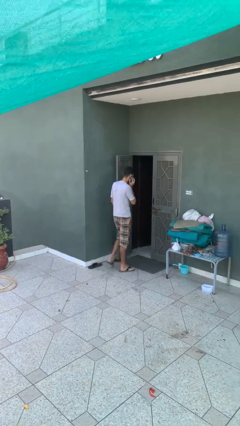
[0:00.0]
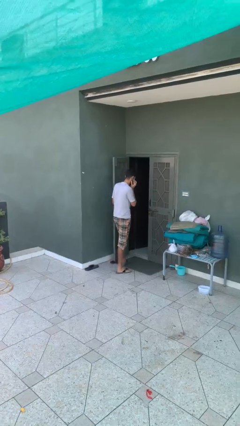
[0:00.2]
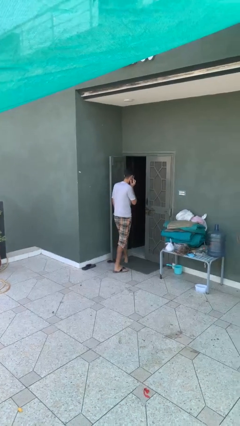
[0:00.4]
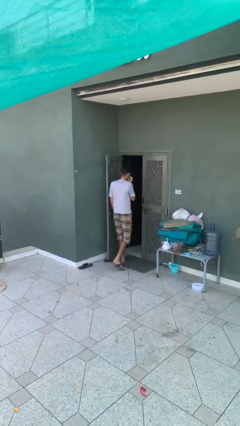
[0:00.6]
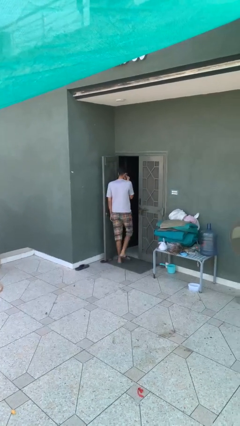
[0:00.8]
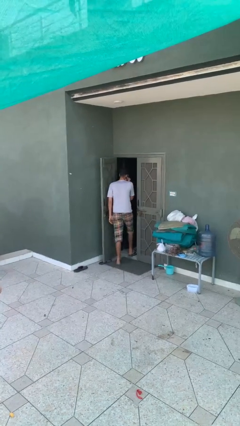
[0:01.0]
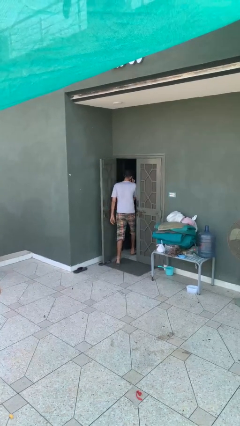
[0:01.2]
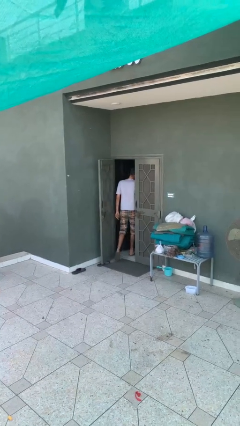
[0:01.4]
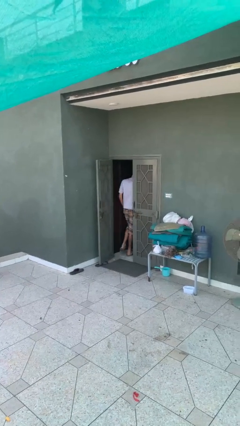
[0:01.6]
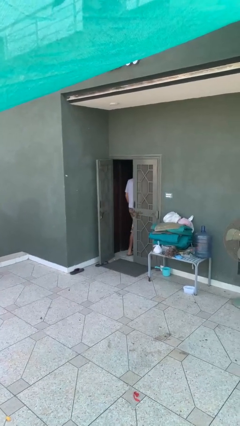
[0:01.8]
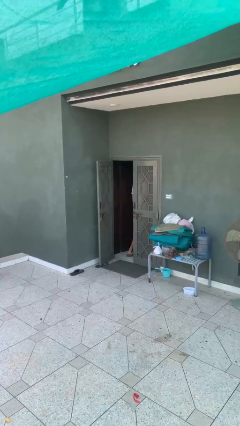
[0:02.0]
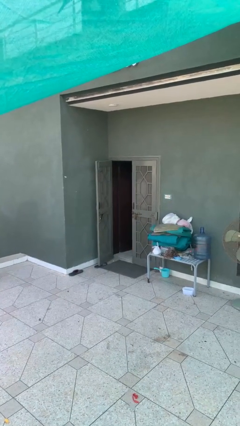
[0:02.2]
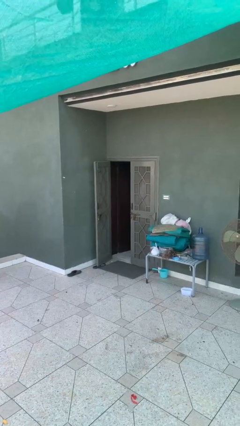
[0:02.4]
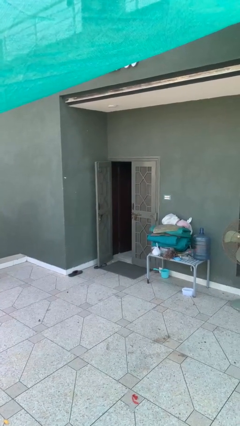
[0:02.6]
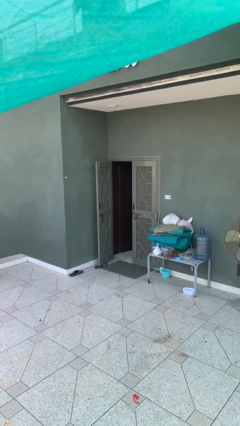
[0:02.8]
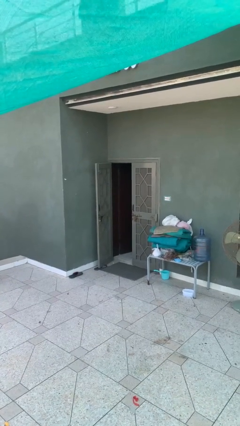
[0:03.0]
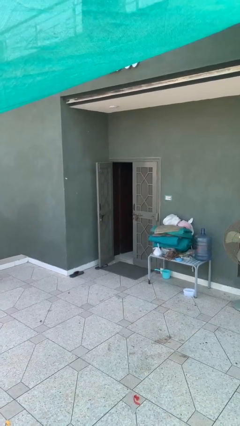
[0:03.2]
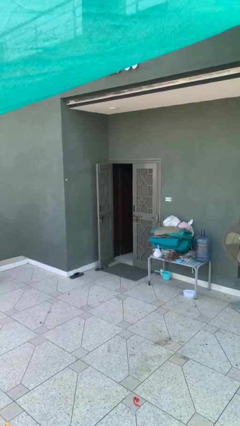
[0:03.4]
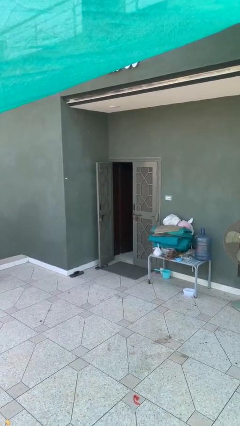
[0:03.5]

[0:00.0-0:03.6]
person exits scene through structure

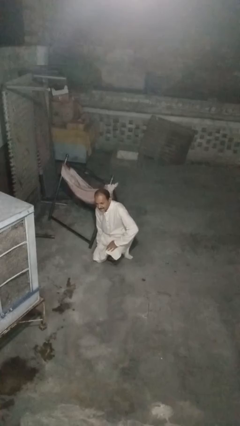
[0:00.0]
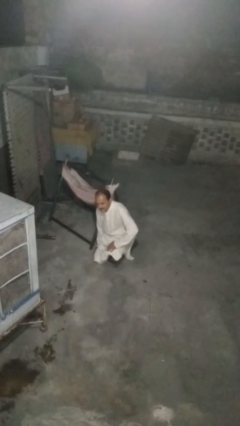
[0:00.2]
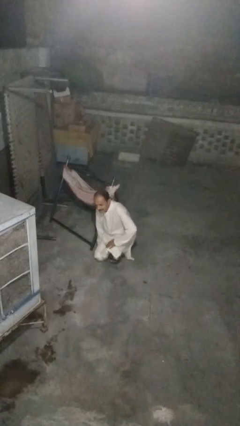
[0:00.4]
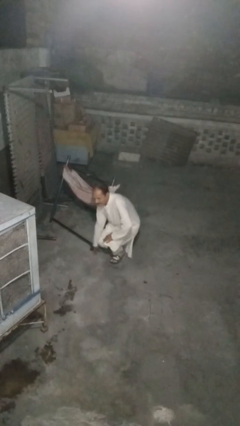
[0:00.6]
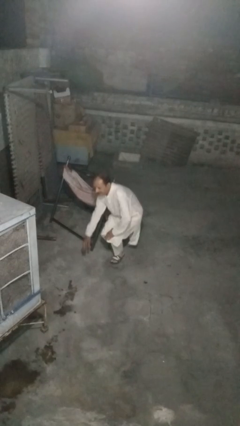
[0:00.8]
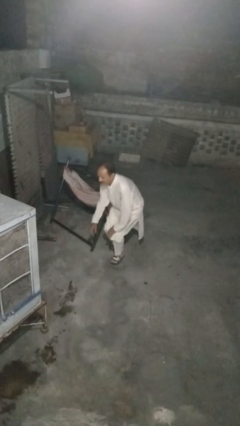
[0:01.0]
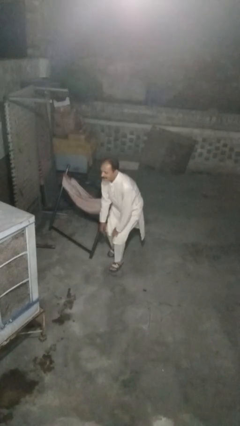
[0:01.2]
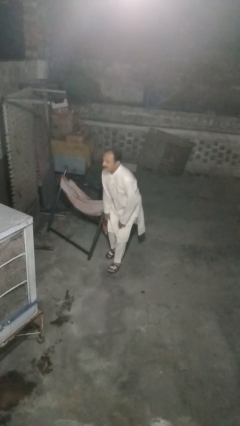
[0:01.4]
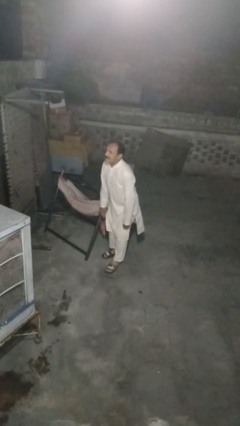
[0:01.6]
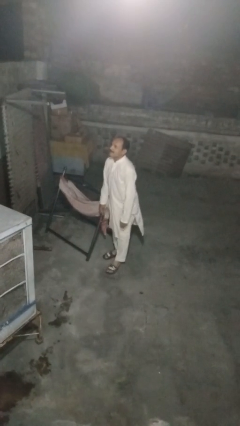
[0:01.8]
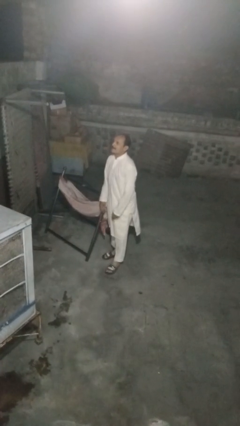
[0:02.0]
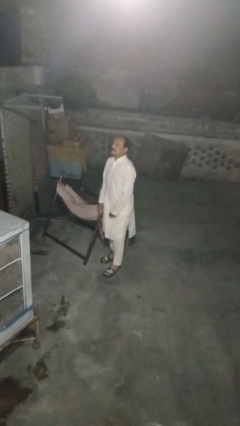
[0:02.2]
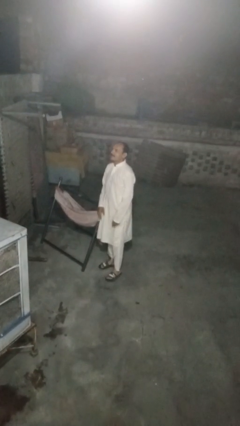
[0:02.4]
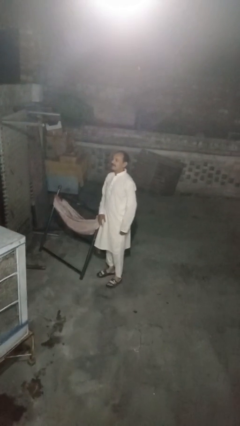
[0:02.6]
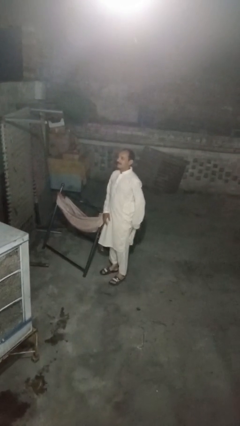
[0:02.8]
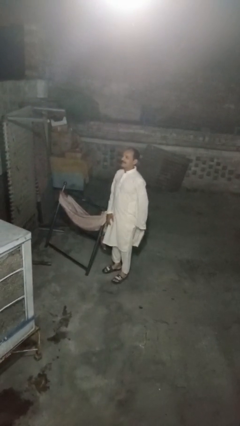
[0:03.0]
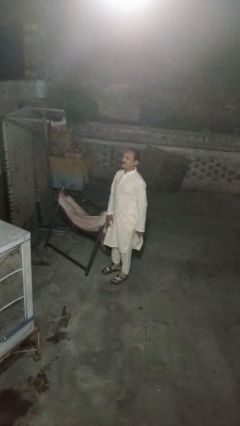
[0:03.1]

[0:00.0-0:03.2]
person stands up from floor

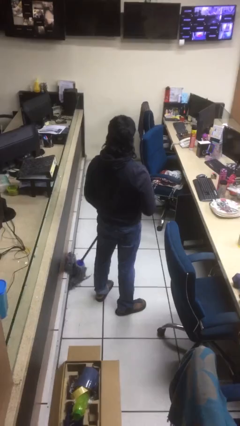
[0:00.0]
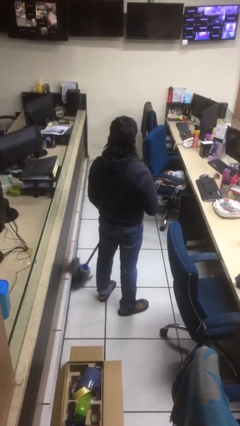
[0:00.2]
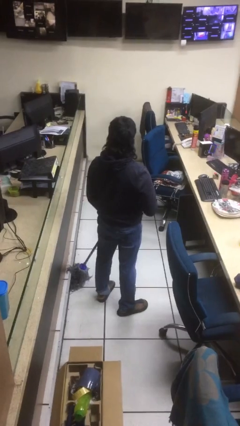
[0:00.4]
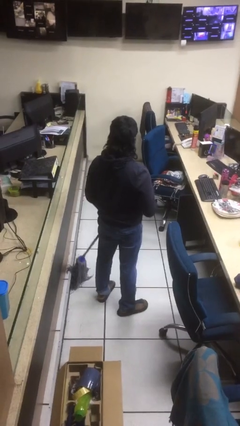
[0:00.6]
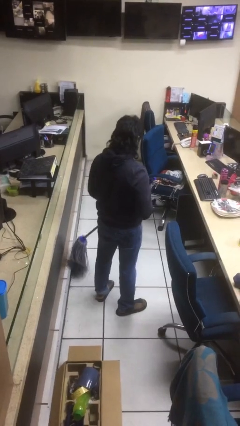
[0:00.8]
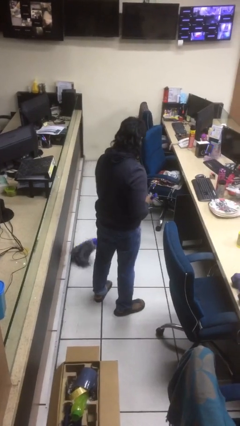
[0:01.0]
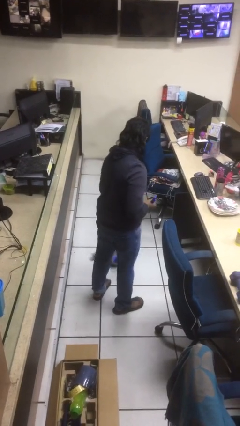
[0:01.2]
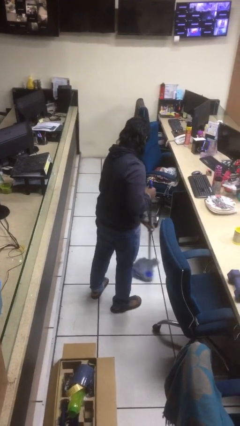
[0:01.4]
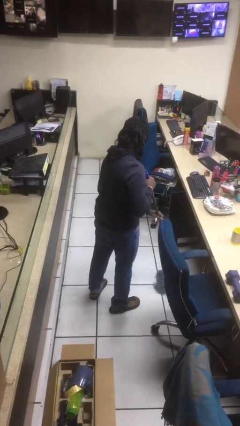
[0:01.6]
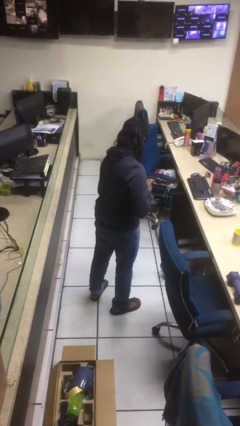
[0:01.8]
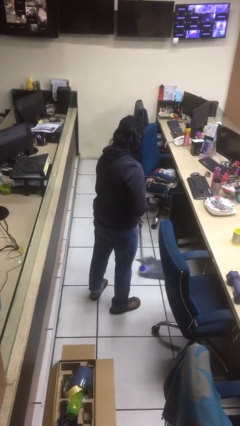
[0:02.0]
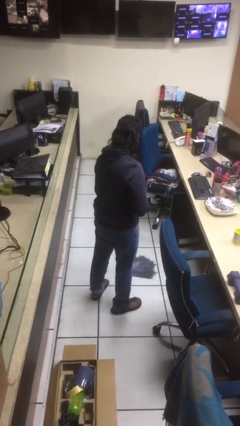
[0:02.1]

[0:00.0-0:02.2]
person mops

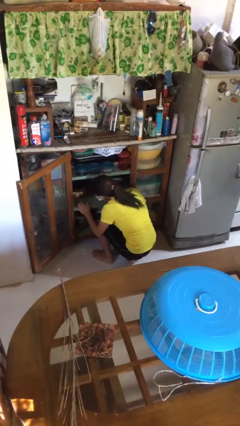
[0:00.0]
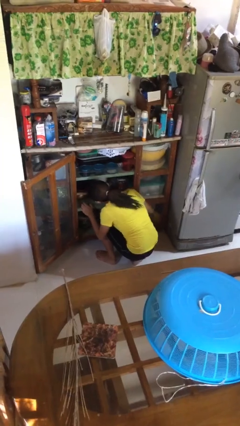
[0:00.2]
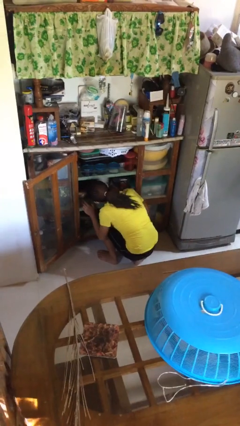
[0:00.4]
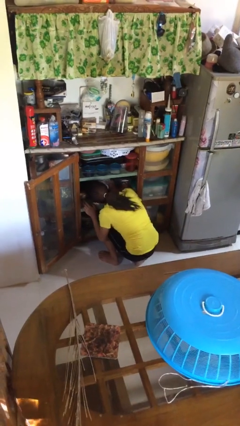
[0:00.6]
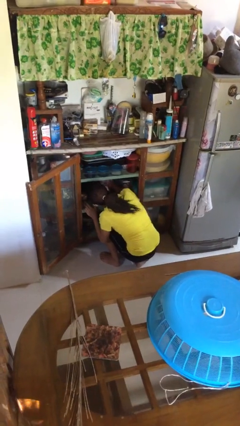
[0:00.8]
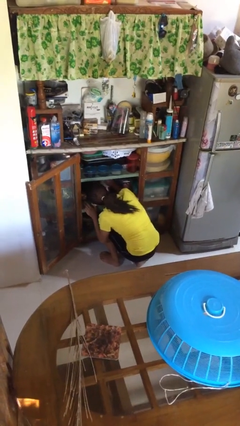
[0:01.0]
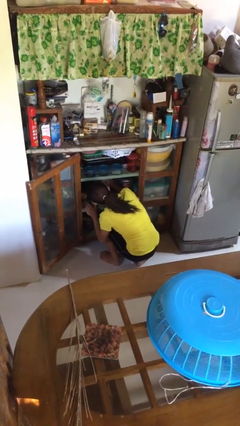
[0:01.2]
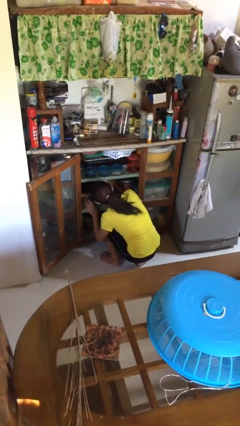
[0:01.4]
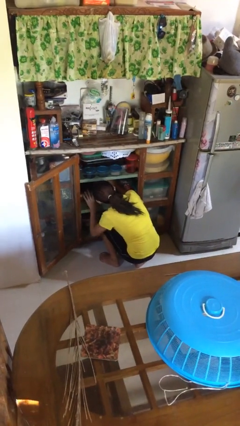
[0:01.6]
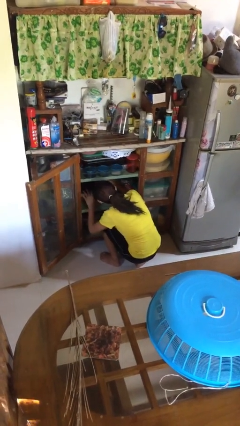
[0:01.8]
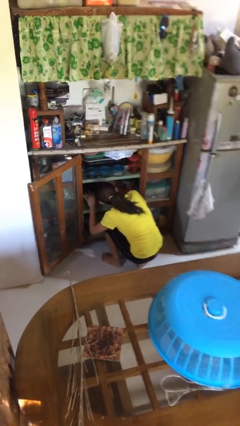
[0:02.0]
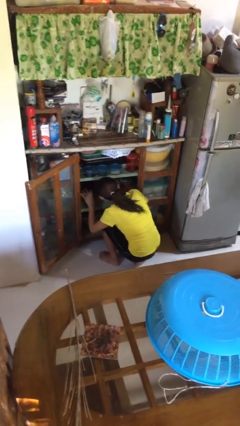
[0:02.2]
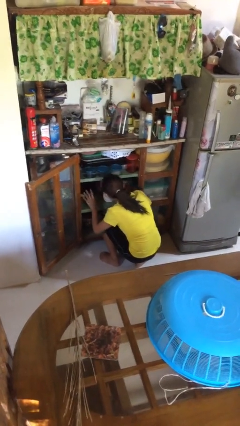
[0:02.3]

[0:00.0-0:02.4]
person searches in cabinet

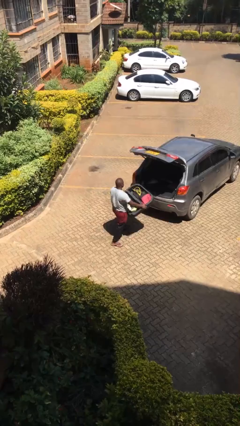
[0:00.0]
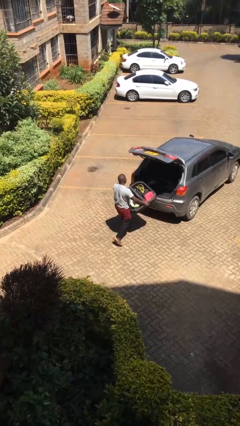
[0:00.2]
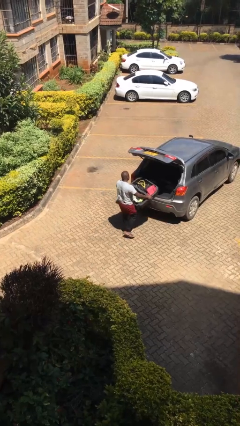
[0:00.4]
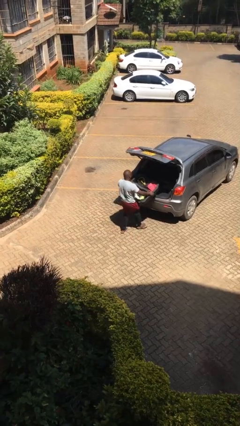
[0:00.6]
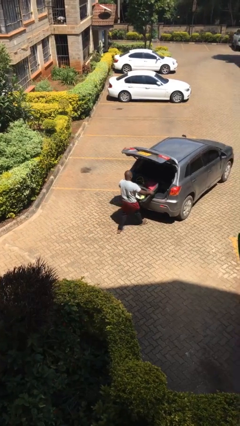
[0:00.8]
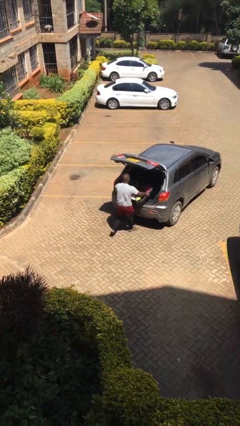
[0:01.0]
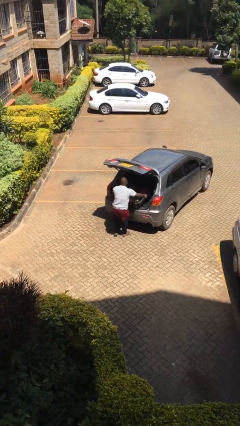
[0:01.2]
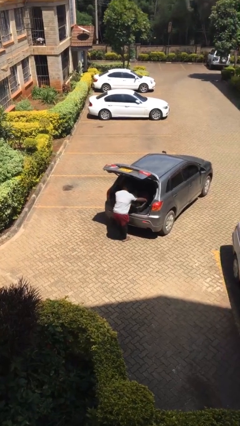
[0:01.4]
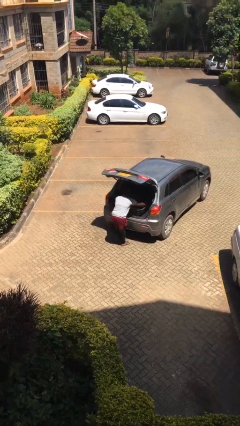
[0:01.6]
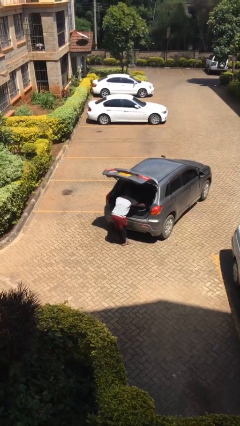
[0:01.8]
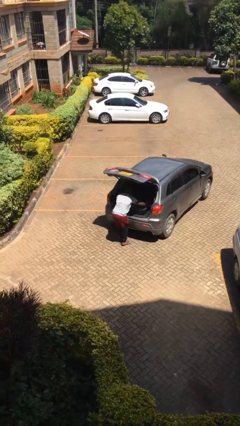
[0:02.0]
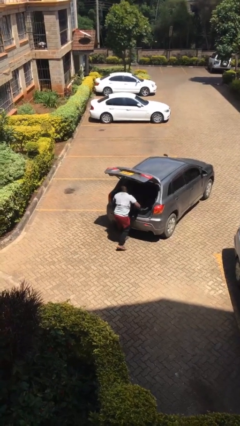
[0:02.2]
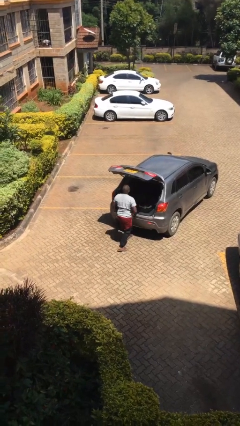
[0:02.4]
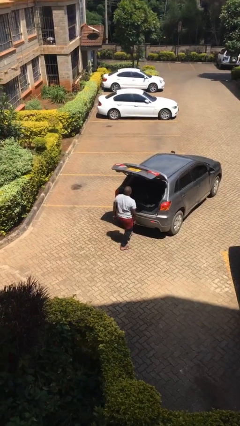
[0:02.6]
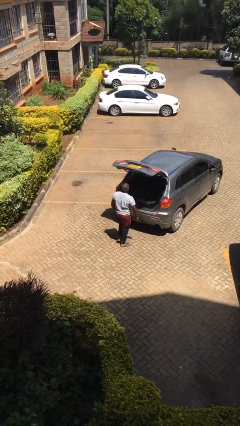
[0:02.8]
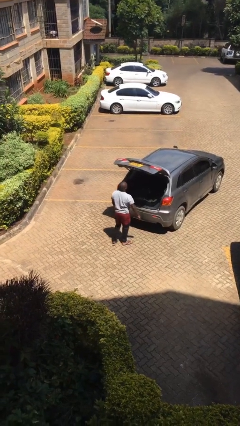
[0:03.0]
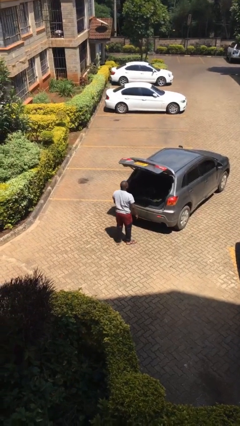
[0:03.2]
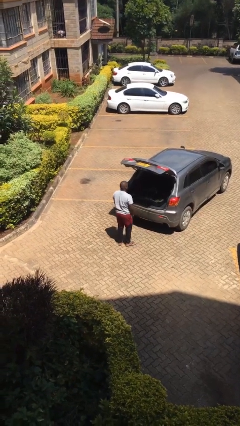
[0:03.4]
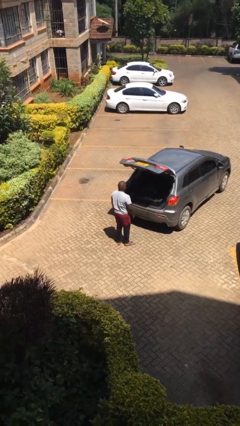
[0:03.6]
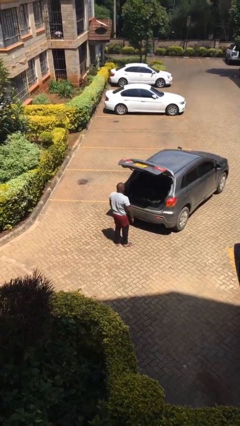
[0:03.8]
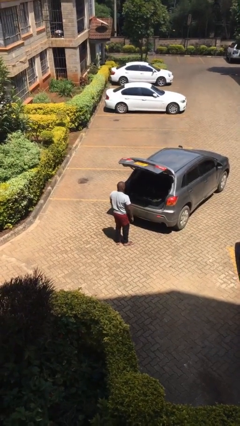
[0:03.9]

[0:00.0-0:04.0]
person loads car

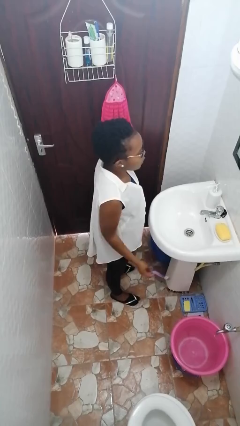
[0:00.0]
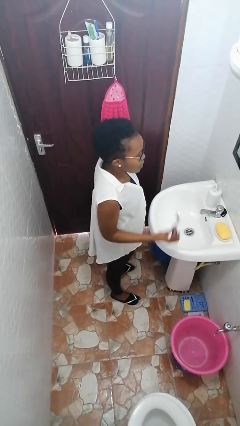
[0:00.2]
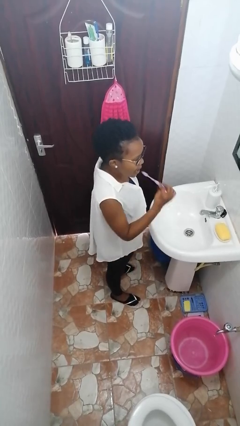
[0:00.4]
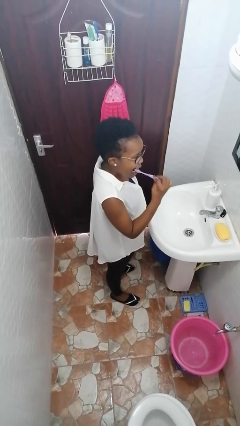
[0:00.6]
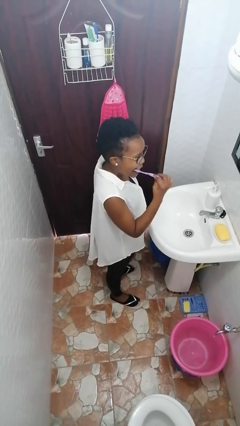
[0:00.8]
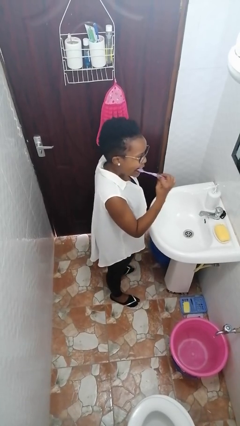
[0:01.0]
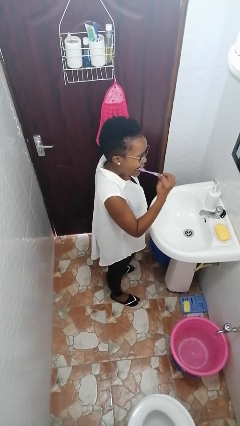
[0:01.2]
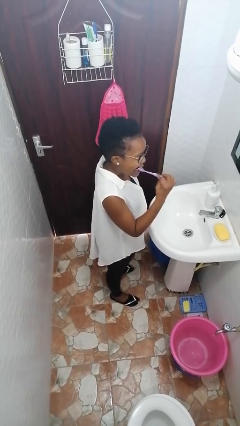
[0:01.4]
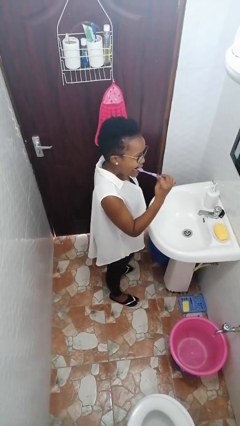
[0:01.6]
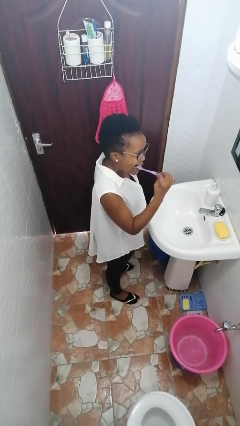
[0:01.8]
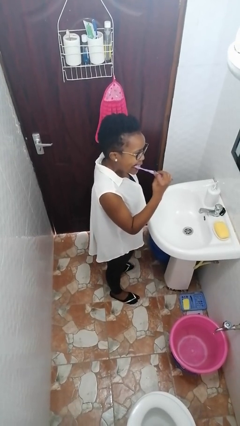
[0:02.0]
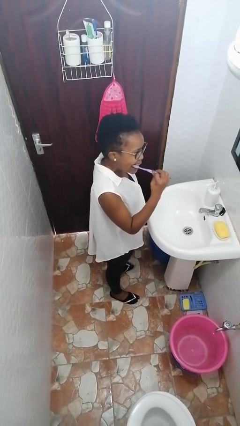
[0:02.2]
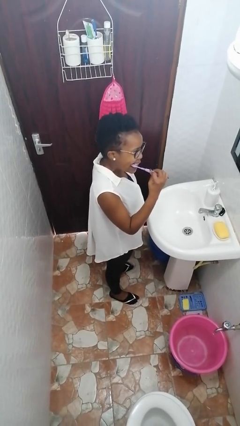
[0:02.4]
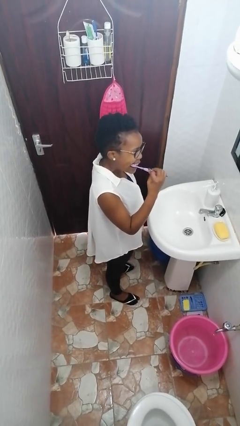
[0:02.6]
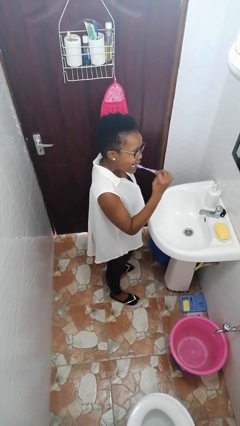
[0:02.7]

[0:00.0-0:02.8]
person brushes teeth
